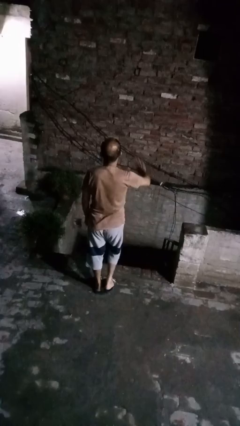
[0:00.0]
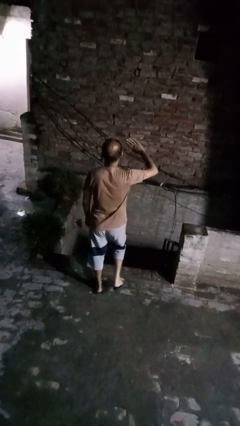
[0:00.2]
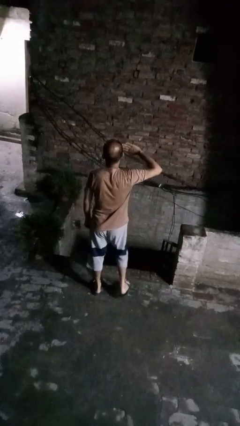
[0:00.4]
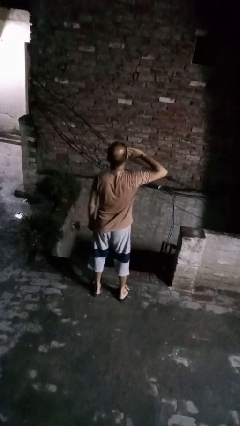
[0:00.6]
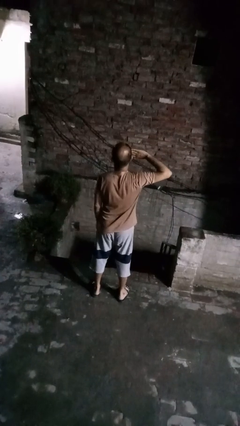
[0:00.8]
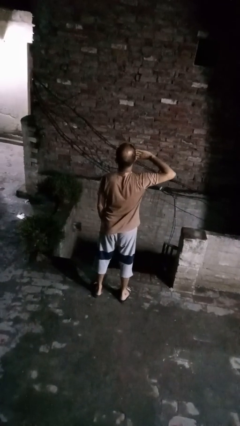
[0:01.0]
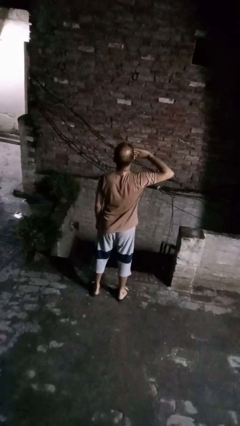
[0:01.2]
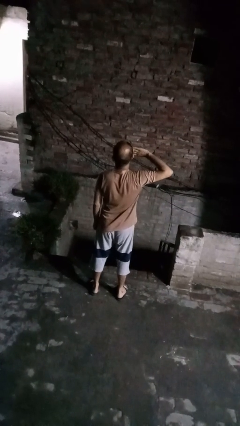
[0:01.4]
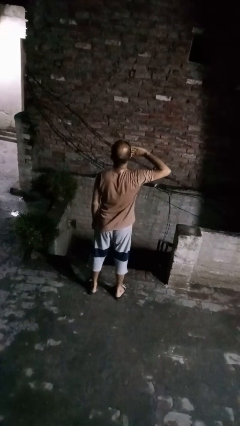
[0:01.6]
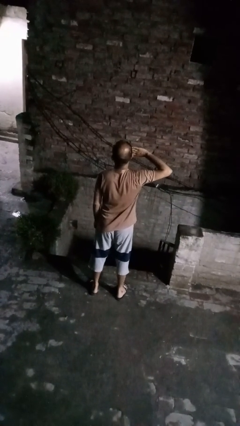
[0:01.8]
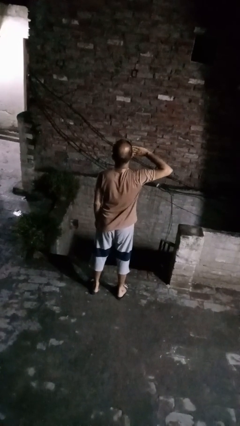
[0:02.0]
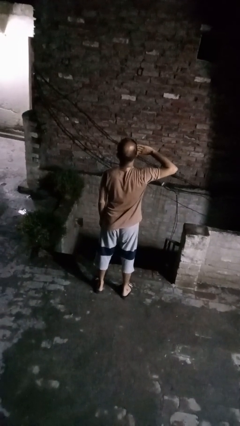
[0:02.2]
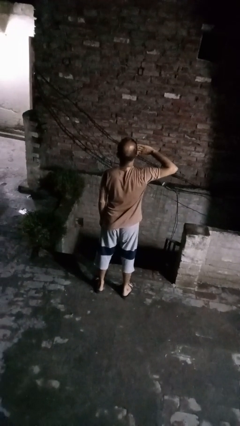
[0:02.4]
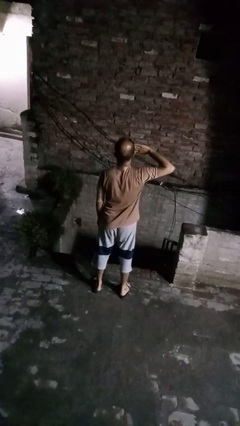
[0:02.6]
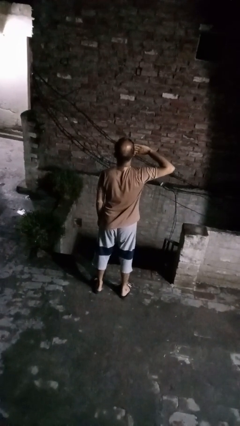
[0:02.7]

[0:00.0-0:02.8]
person salutes

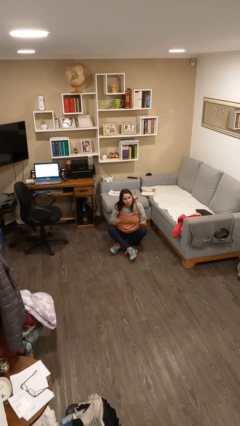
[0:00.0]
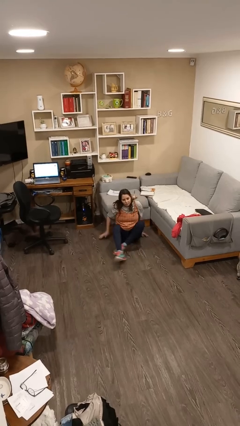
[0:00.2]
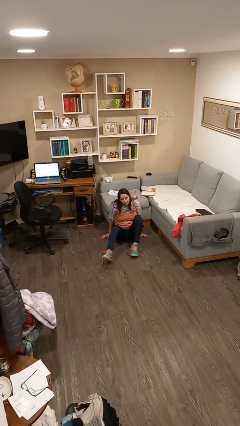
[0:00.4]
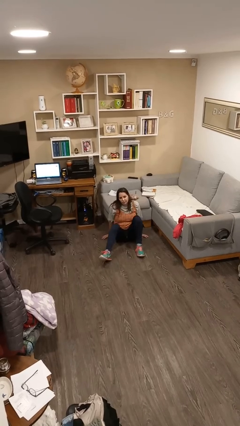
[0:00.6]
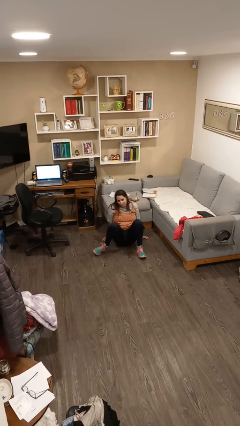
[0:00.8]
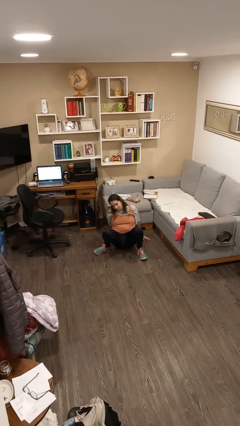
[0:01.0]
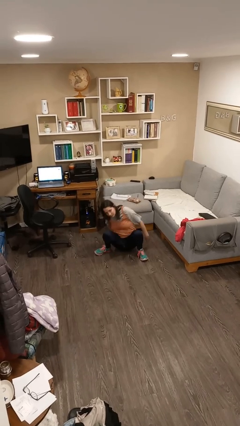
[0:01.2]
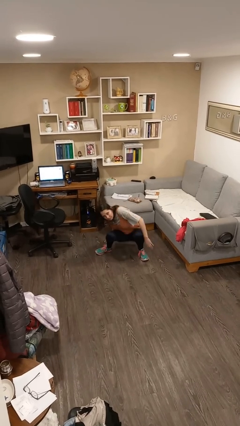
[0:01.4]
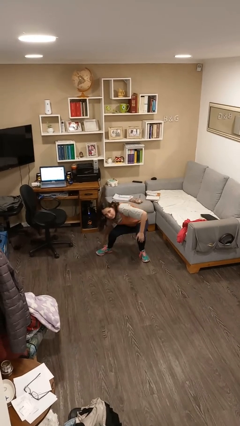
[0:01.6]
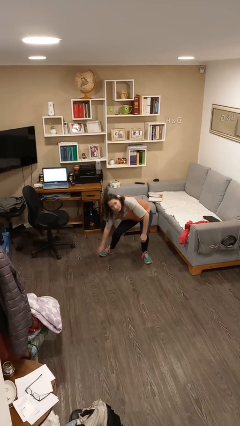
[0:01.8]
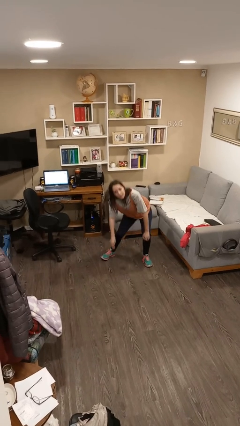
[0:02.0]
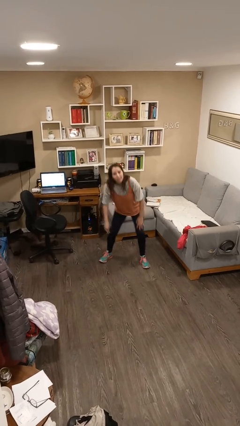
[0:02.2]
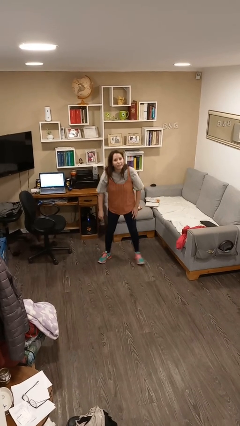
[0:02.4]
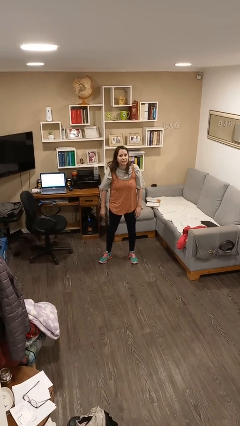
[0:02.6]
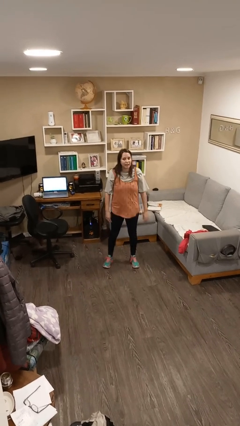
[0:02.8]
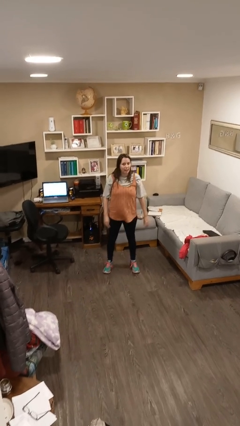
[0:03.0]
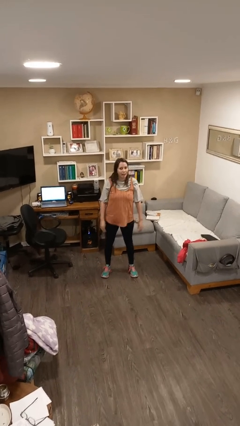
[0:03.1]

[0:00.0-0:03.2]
person stands up from floor

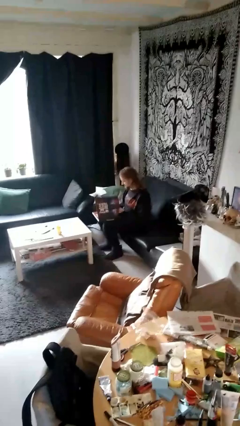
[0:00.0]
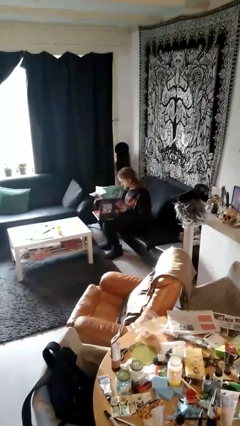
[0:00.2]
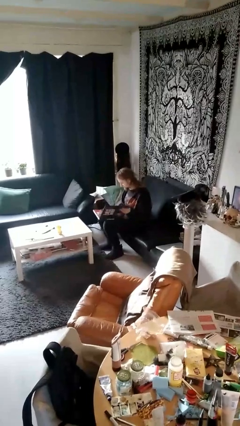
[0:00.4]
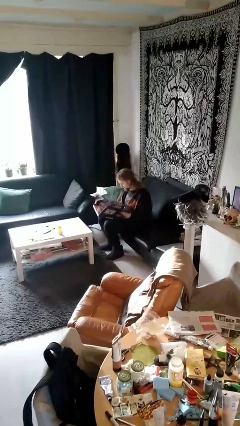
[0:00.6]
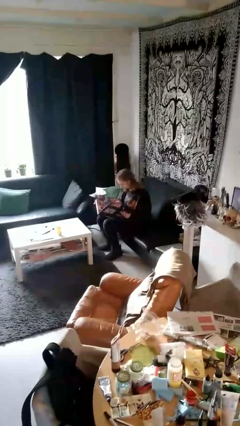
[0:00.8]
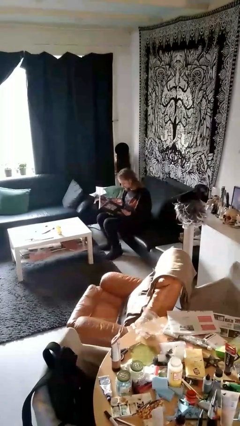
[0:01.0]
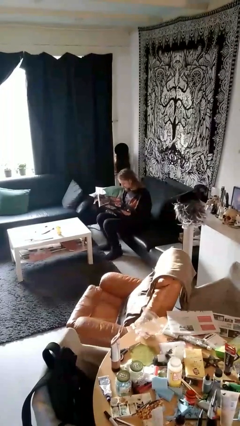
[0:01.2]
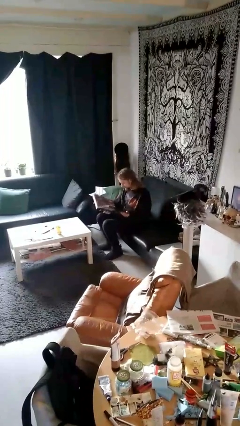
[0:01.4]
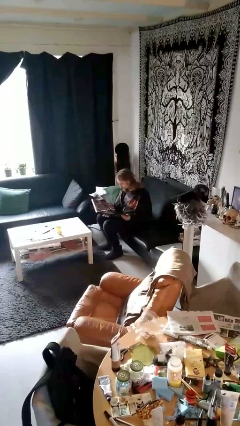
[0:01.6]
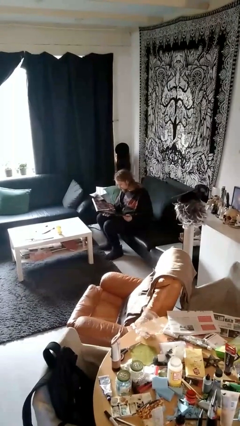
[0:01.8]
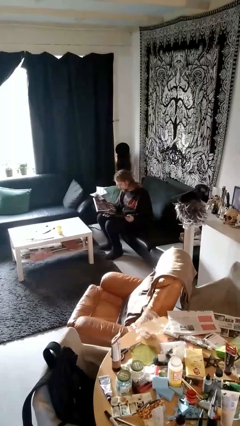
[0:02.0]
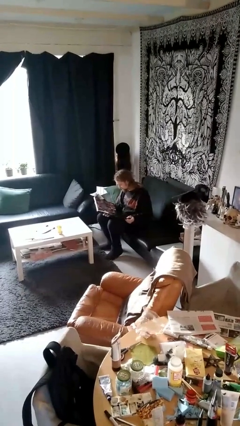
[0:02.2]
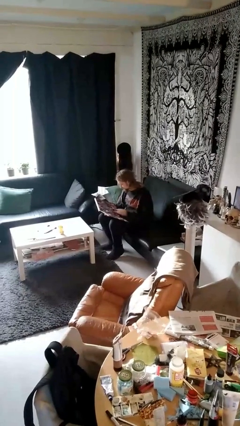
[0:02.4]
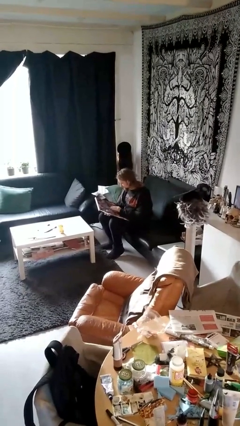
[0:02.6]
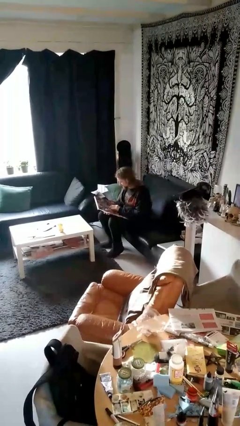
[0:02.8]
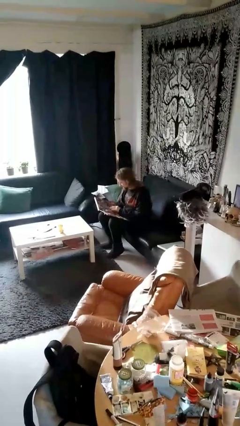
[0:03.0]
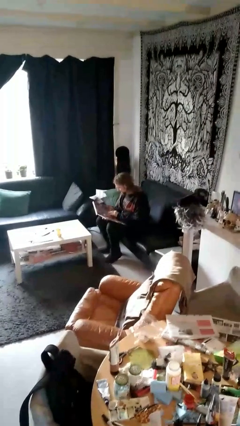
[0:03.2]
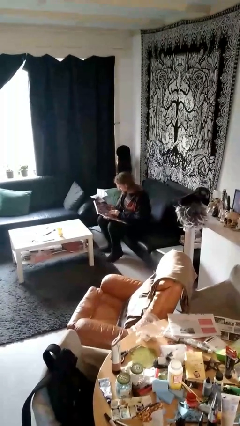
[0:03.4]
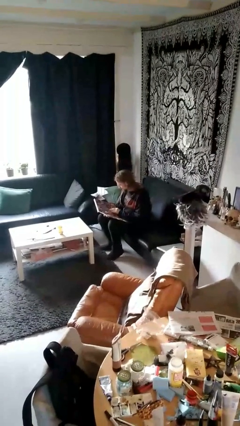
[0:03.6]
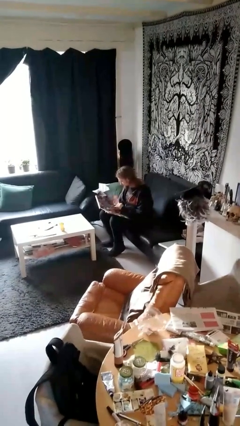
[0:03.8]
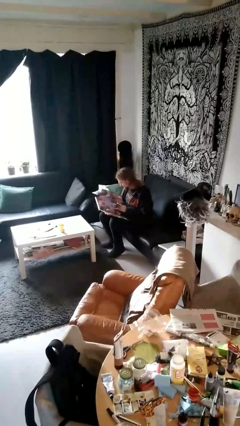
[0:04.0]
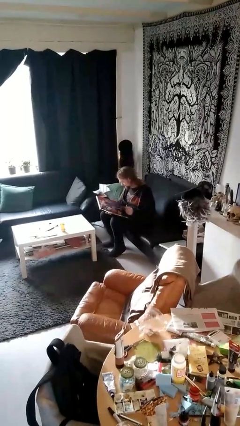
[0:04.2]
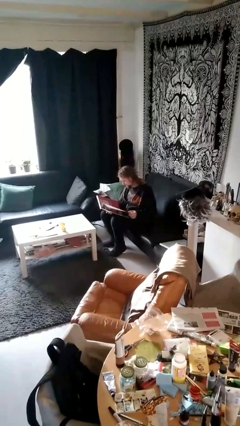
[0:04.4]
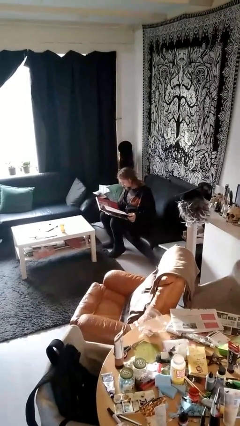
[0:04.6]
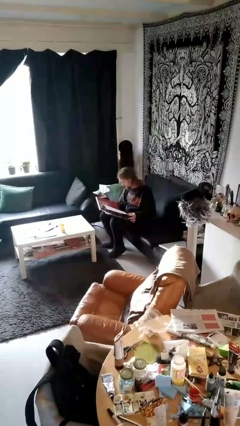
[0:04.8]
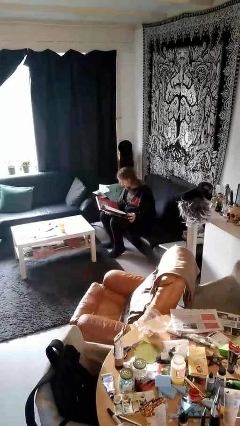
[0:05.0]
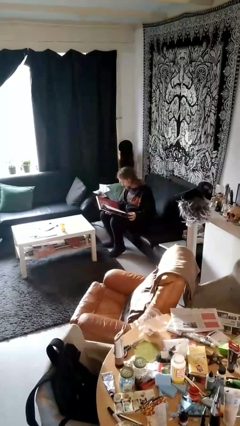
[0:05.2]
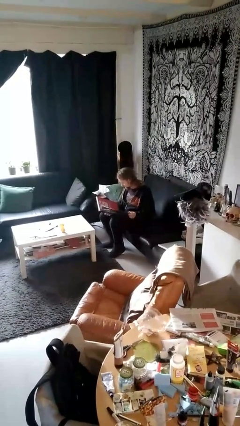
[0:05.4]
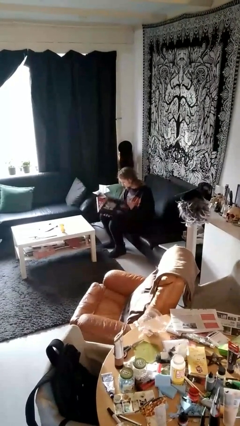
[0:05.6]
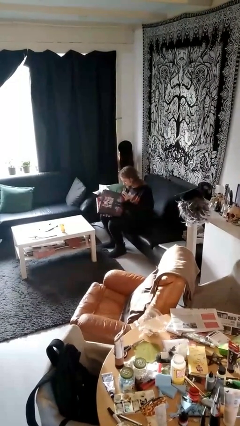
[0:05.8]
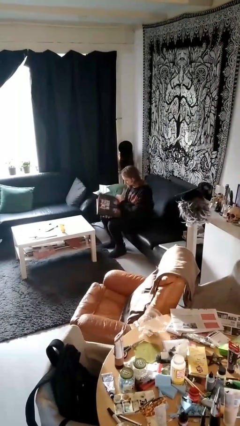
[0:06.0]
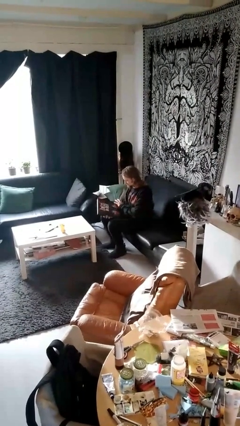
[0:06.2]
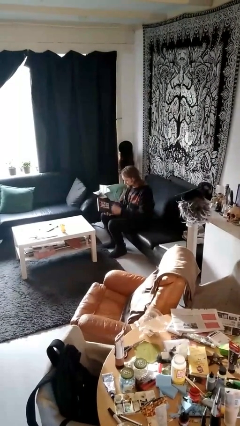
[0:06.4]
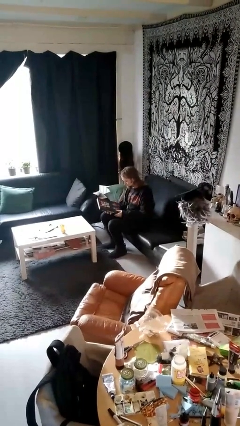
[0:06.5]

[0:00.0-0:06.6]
person reads document

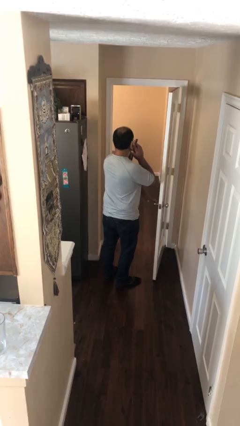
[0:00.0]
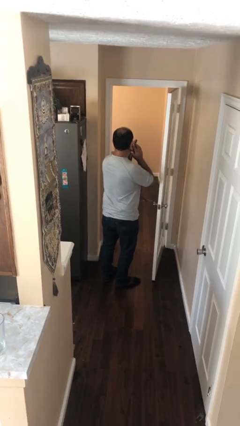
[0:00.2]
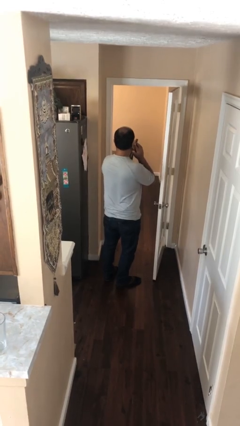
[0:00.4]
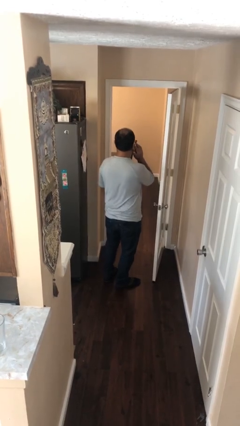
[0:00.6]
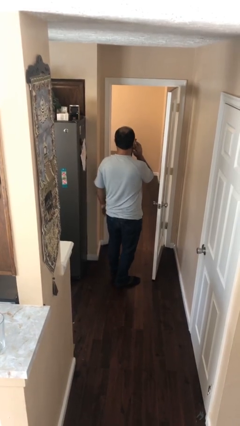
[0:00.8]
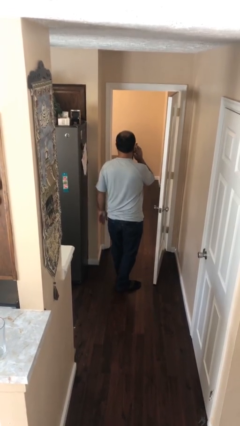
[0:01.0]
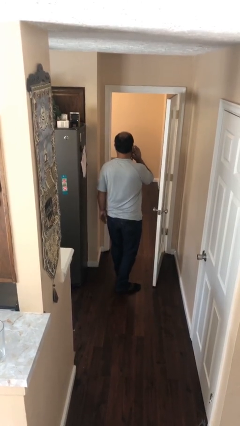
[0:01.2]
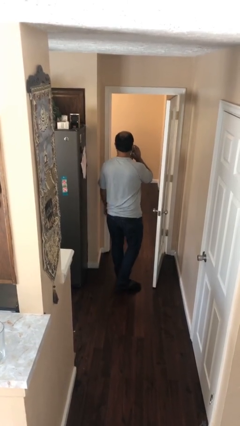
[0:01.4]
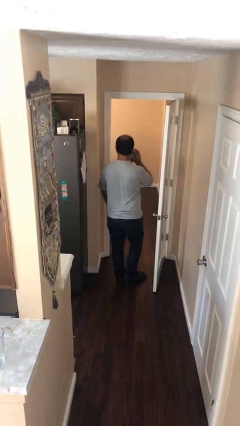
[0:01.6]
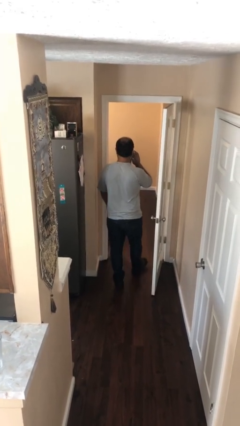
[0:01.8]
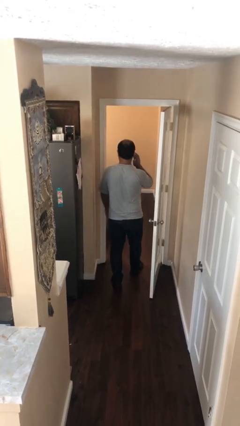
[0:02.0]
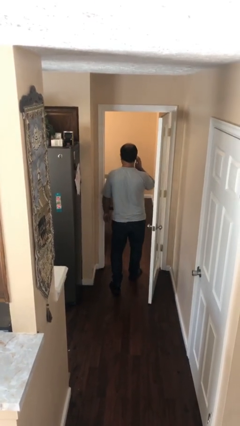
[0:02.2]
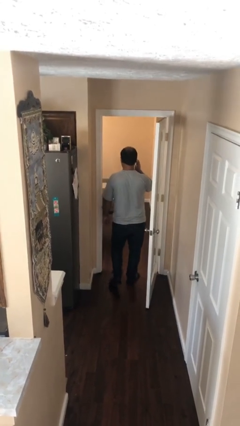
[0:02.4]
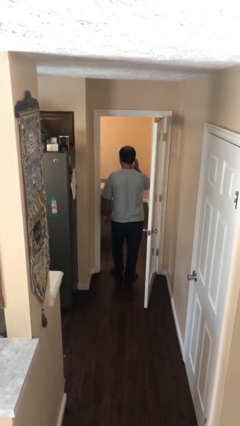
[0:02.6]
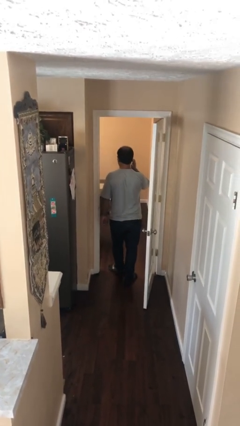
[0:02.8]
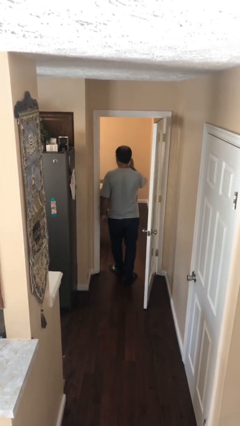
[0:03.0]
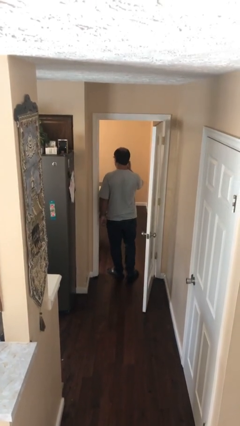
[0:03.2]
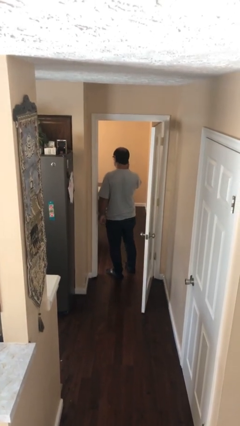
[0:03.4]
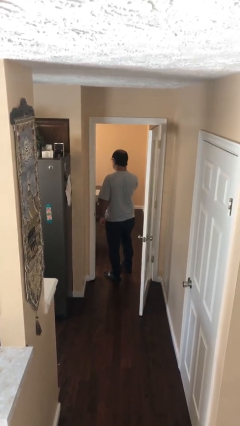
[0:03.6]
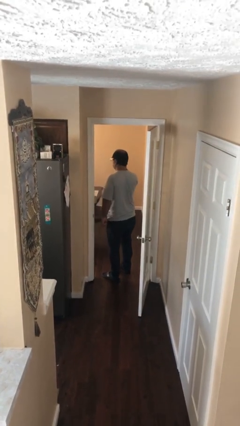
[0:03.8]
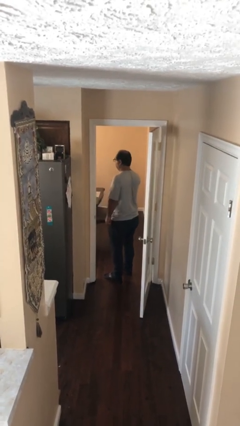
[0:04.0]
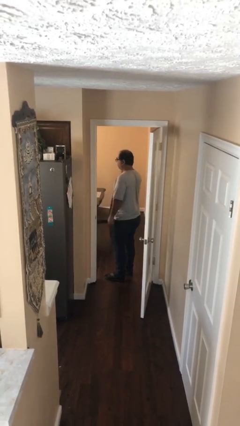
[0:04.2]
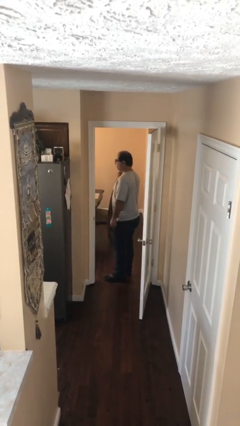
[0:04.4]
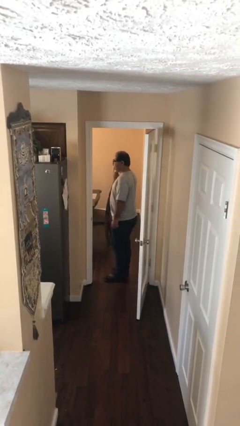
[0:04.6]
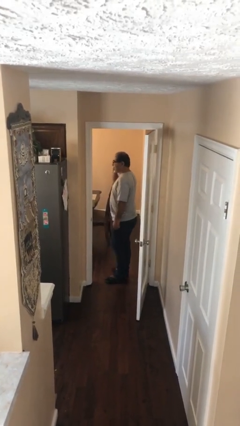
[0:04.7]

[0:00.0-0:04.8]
person exits scene through structure

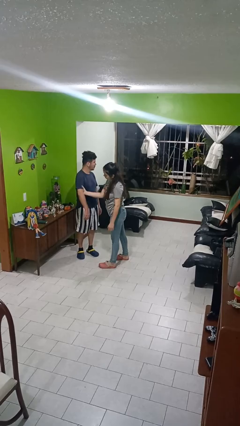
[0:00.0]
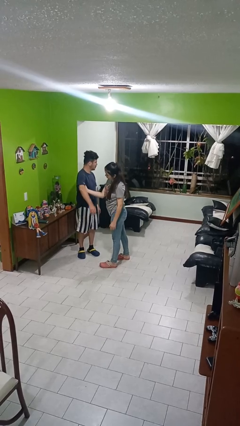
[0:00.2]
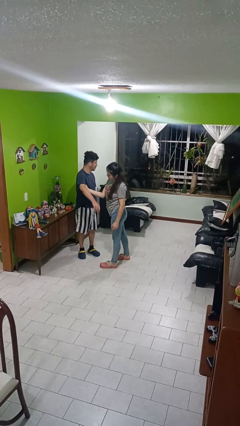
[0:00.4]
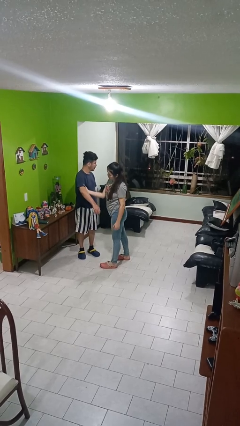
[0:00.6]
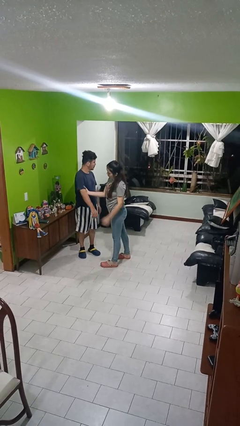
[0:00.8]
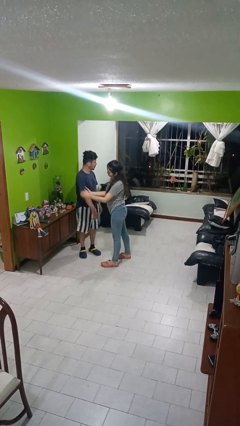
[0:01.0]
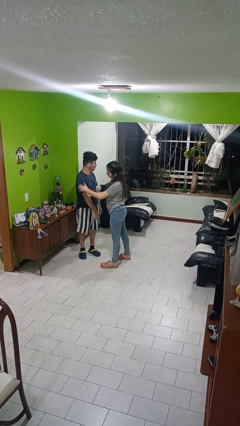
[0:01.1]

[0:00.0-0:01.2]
person grabs person by bicep
